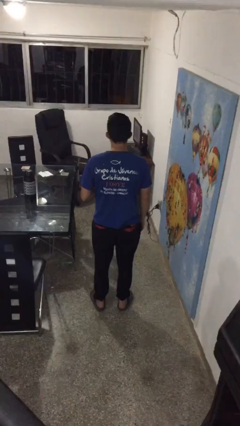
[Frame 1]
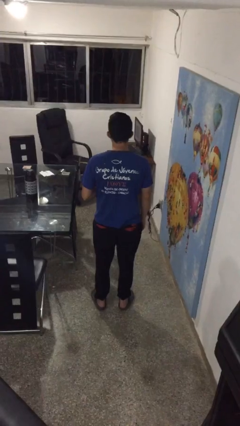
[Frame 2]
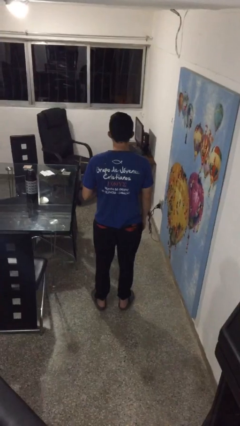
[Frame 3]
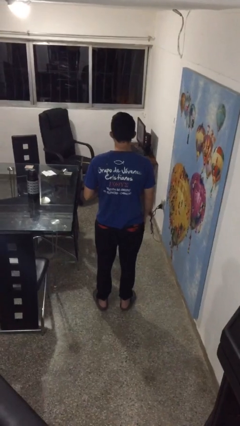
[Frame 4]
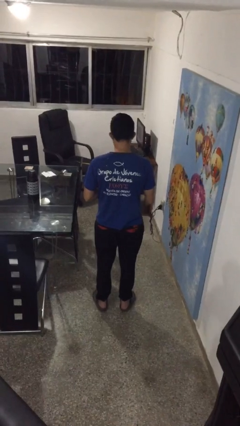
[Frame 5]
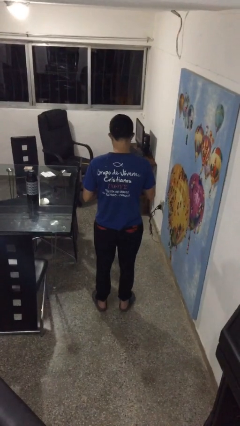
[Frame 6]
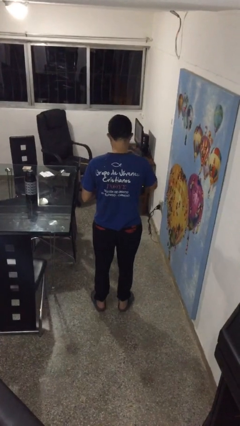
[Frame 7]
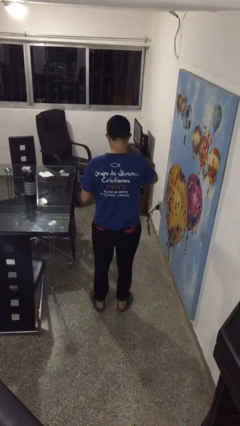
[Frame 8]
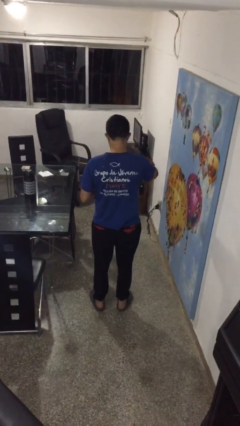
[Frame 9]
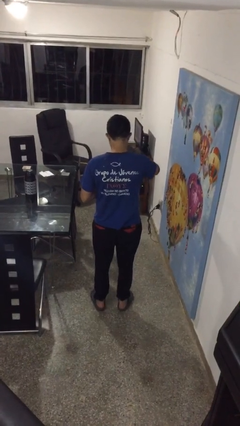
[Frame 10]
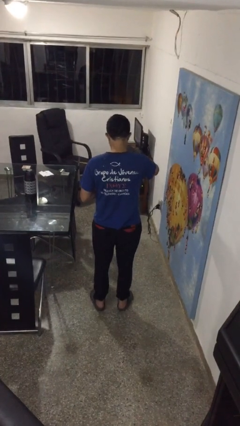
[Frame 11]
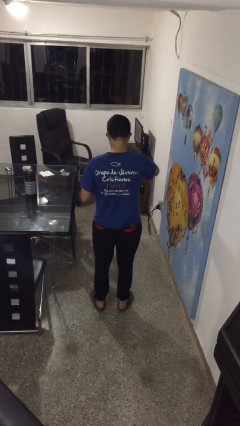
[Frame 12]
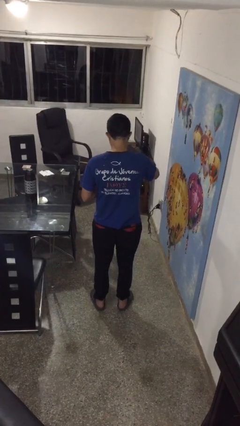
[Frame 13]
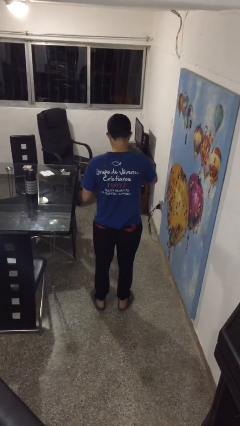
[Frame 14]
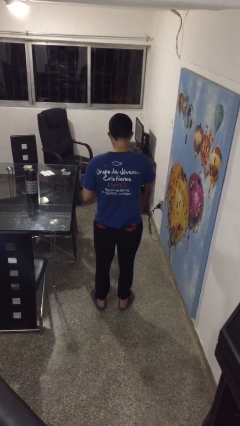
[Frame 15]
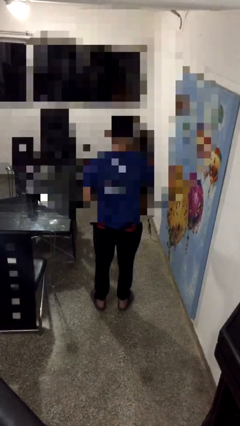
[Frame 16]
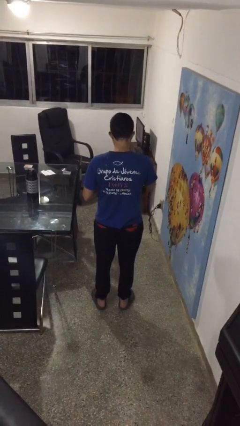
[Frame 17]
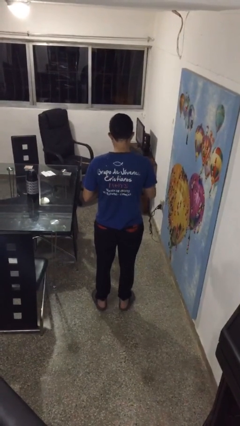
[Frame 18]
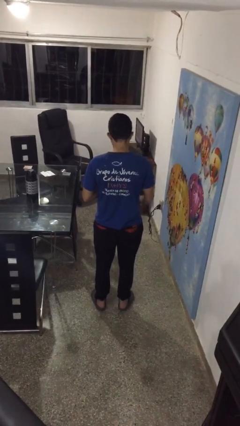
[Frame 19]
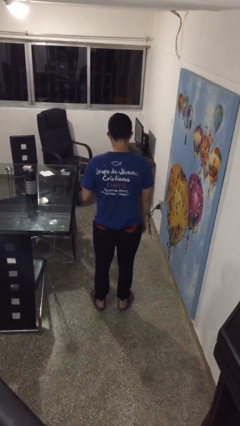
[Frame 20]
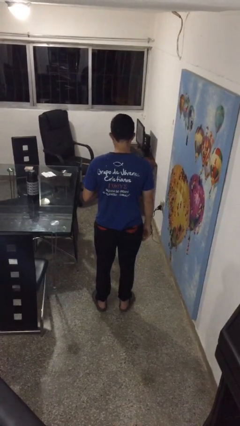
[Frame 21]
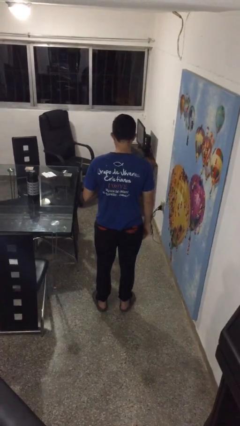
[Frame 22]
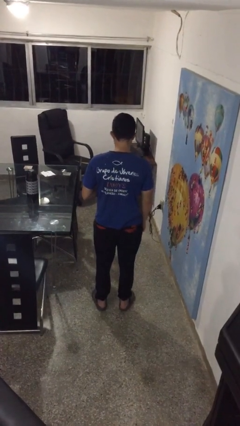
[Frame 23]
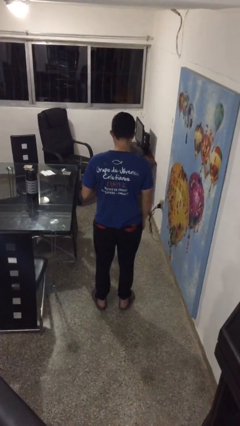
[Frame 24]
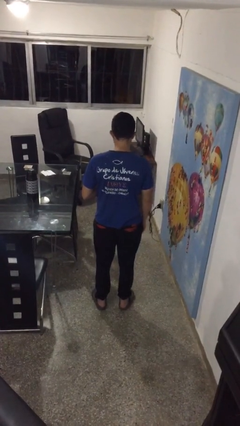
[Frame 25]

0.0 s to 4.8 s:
person eats snack from bag

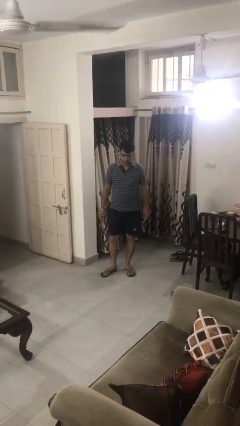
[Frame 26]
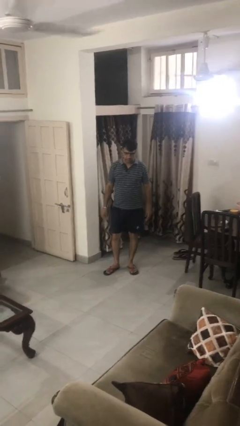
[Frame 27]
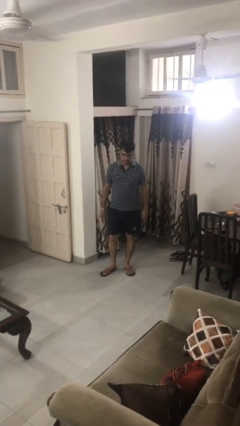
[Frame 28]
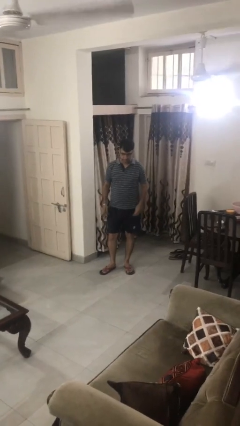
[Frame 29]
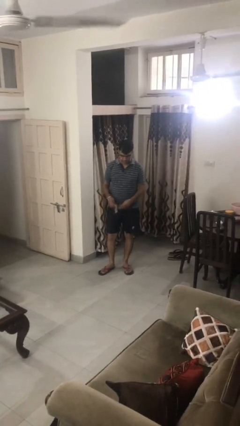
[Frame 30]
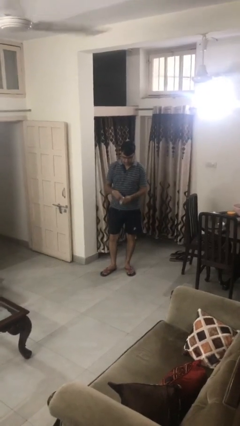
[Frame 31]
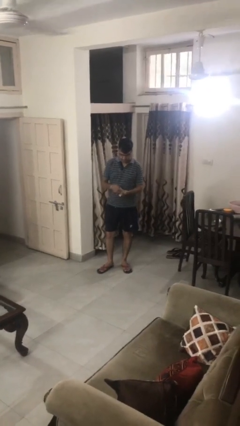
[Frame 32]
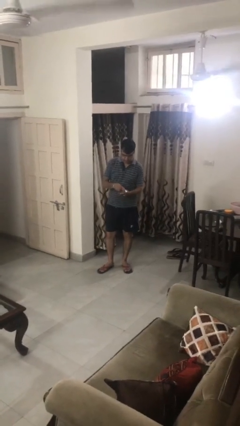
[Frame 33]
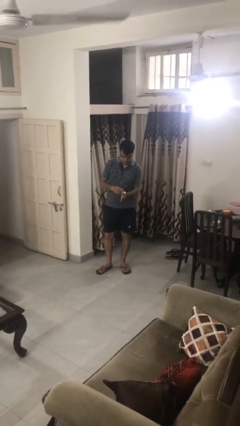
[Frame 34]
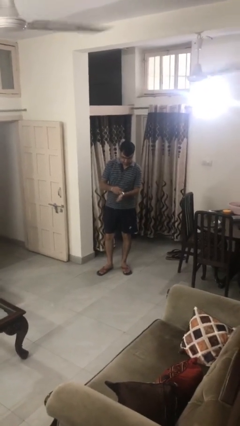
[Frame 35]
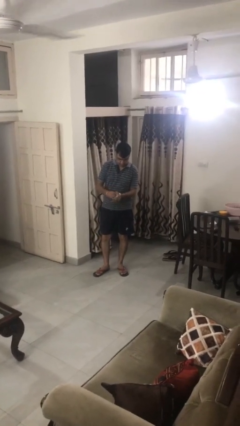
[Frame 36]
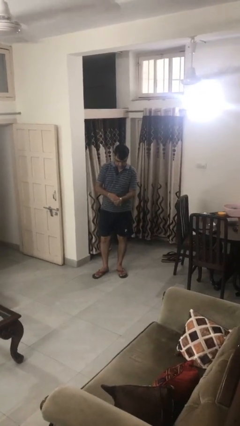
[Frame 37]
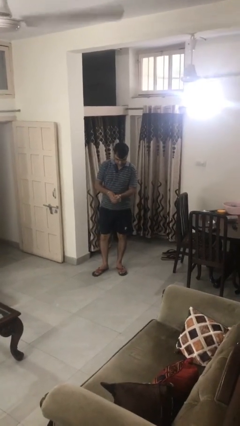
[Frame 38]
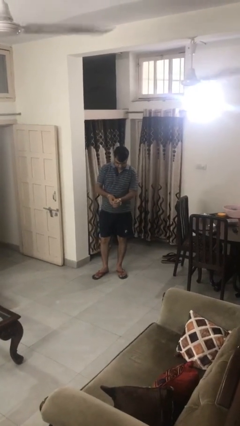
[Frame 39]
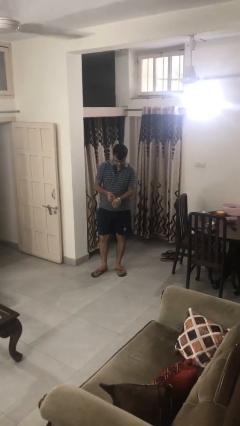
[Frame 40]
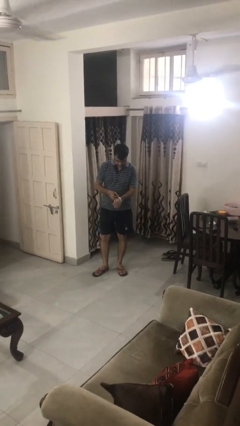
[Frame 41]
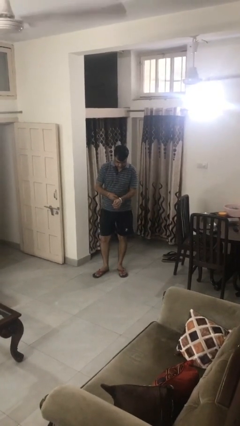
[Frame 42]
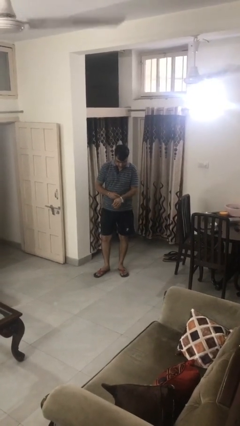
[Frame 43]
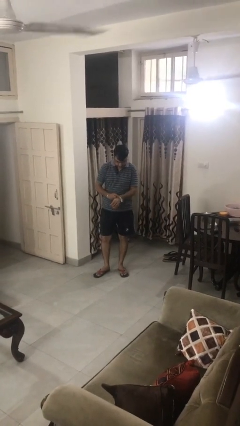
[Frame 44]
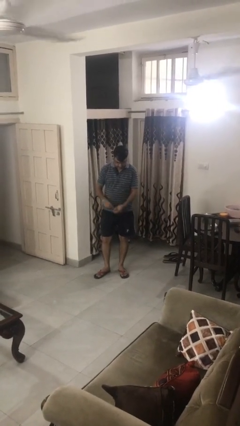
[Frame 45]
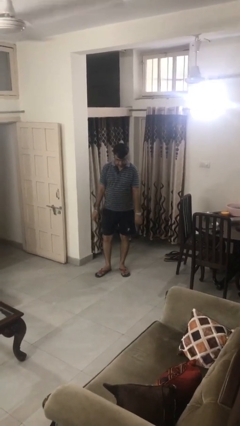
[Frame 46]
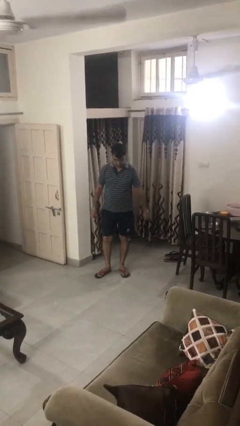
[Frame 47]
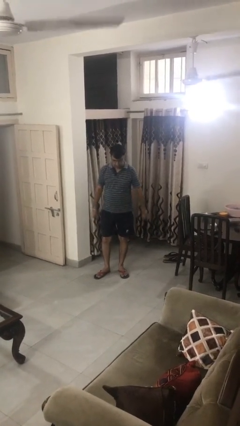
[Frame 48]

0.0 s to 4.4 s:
person puts on wristwatch

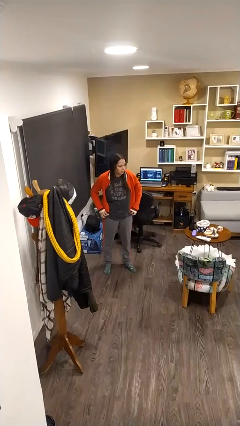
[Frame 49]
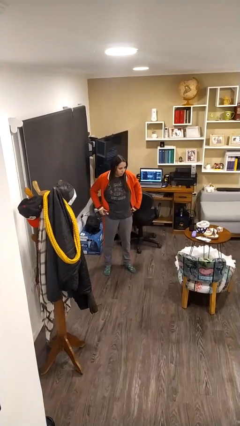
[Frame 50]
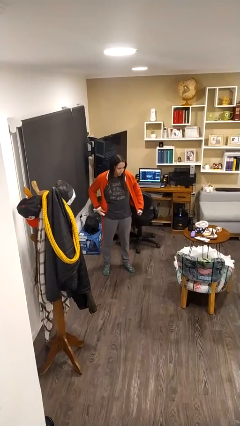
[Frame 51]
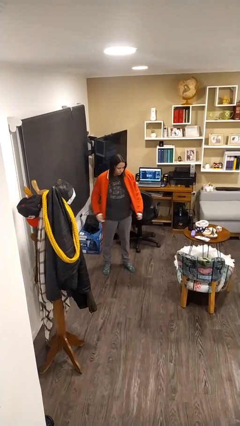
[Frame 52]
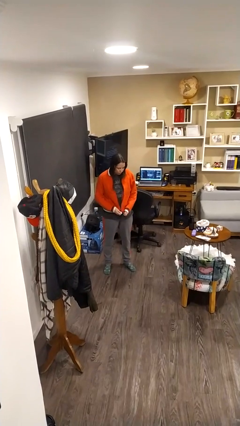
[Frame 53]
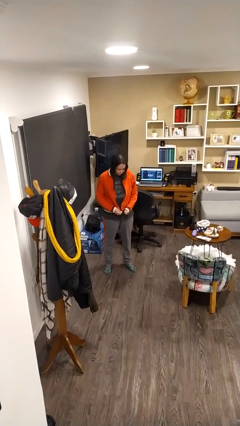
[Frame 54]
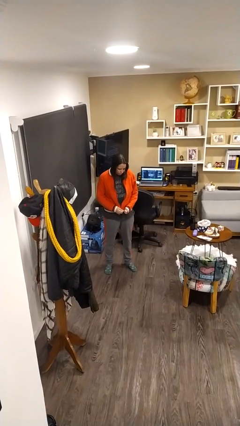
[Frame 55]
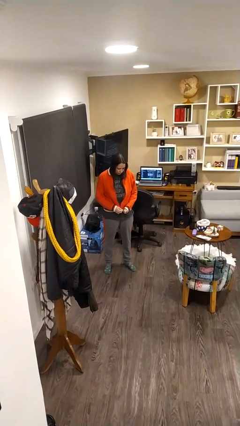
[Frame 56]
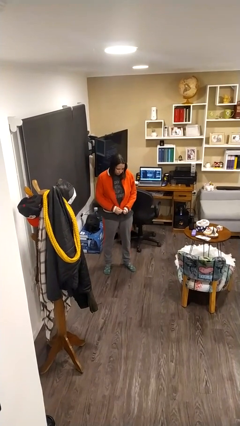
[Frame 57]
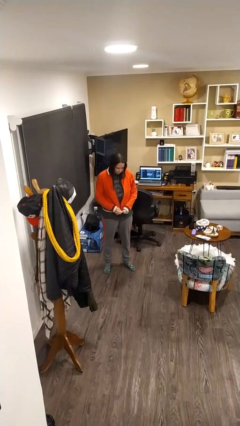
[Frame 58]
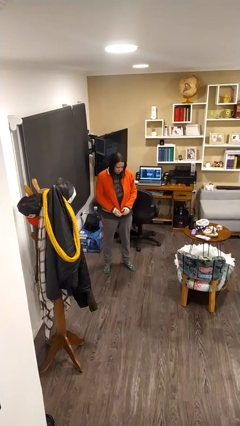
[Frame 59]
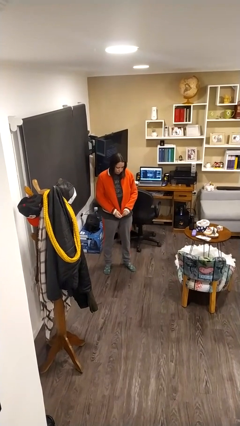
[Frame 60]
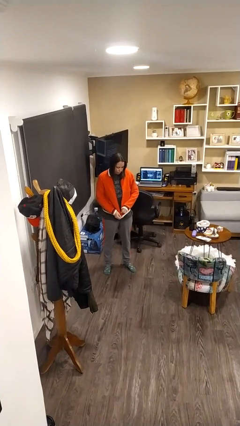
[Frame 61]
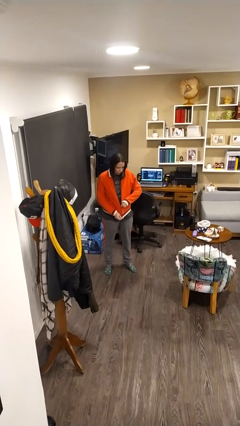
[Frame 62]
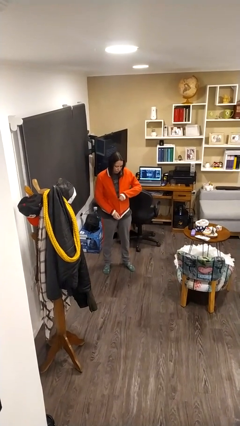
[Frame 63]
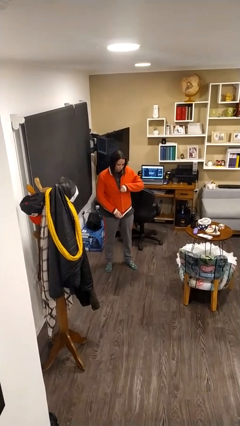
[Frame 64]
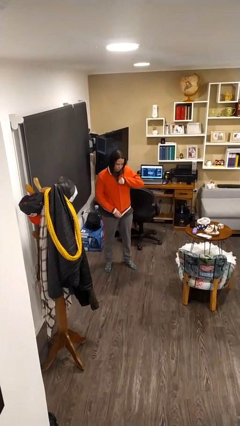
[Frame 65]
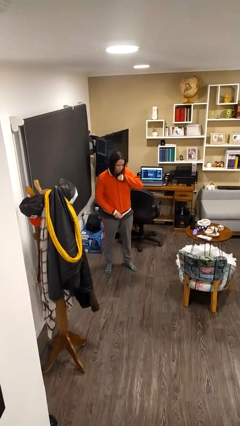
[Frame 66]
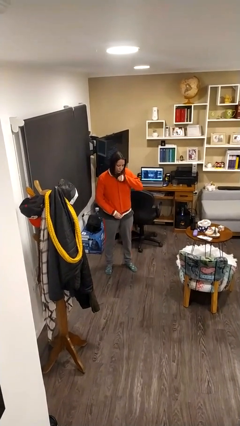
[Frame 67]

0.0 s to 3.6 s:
person zips up jacket

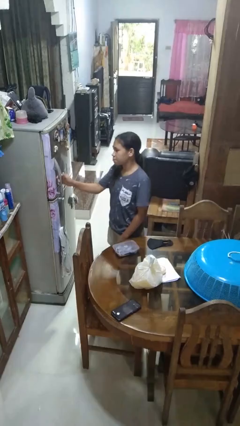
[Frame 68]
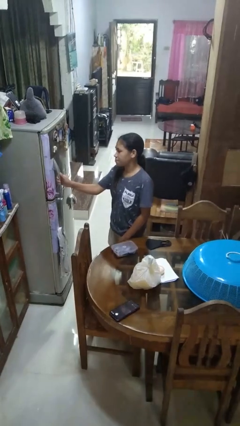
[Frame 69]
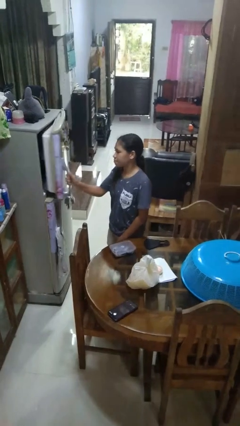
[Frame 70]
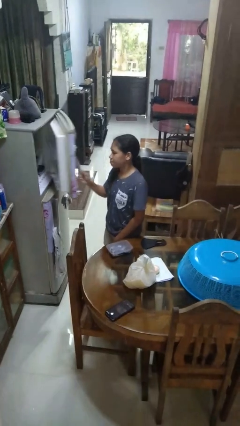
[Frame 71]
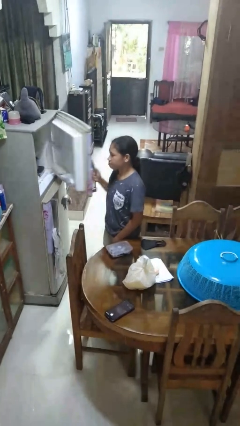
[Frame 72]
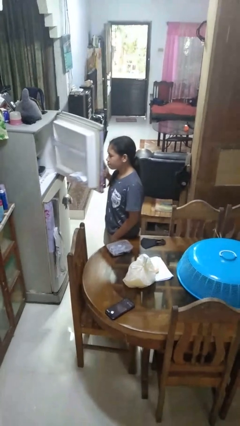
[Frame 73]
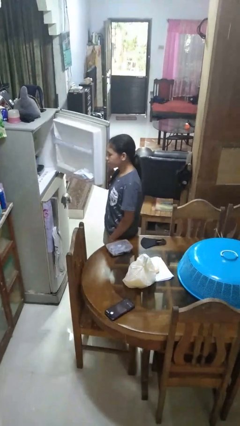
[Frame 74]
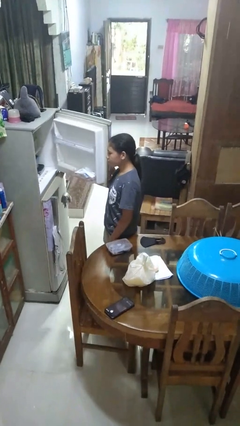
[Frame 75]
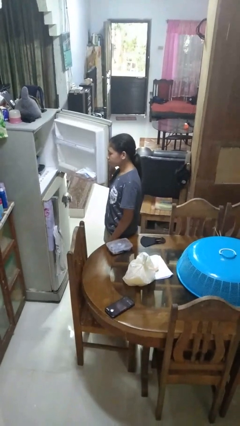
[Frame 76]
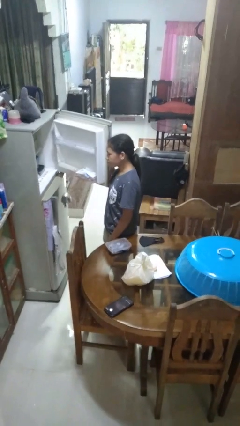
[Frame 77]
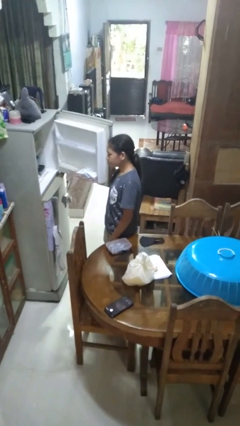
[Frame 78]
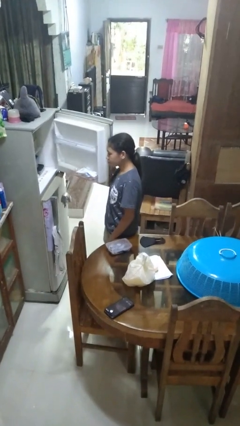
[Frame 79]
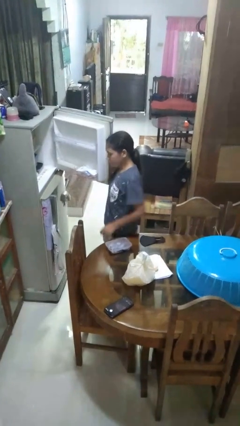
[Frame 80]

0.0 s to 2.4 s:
person opens refrigerator

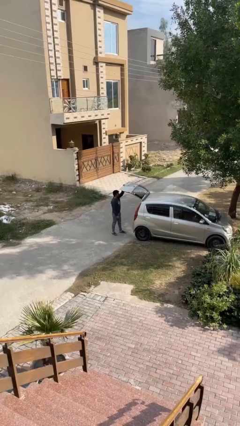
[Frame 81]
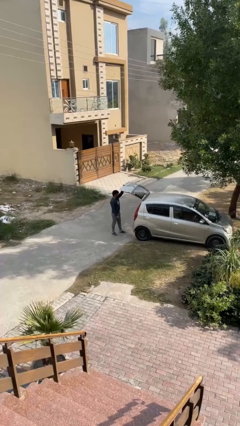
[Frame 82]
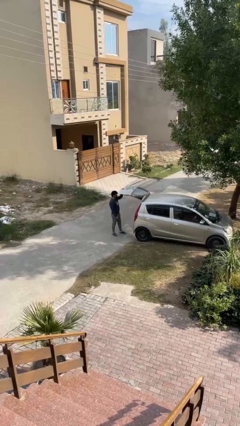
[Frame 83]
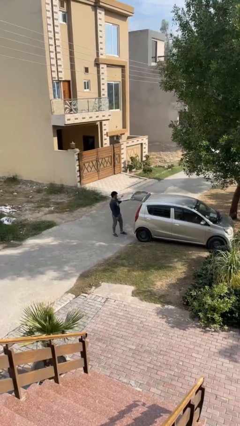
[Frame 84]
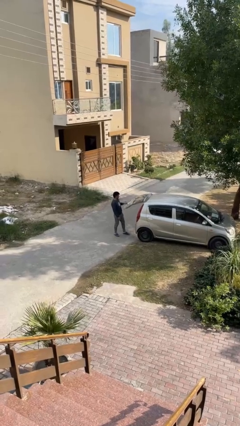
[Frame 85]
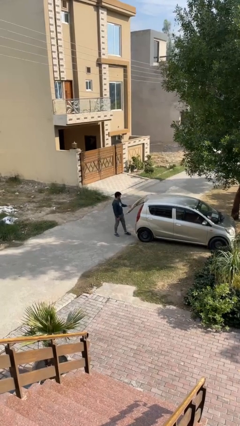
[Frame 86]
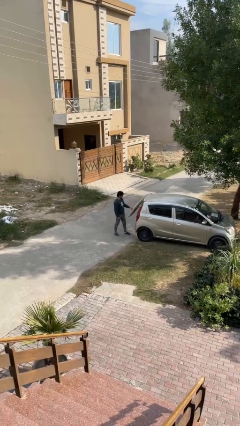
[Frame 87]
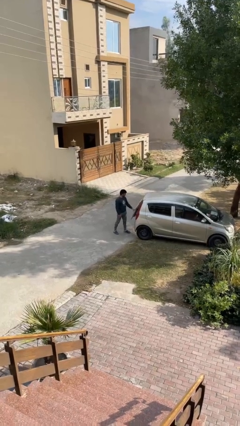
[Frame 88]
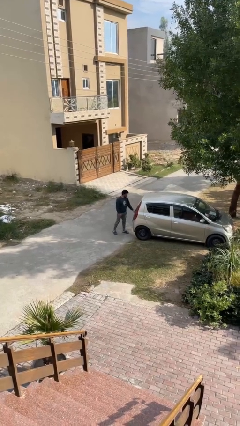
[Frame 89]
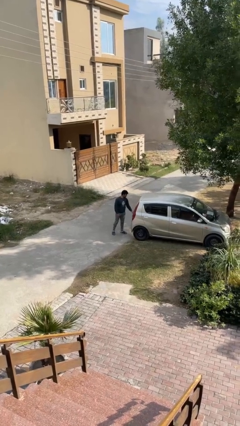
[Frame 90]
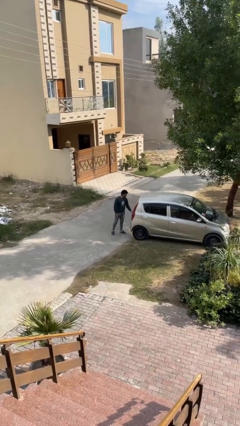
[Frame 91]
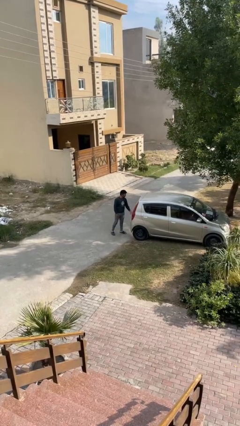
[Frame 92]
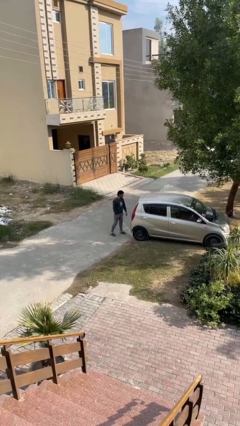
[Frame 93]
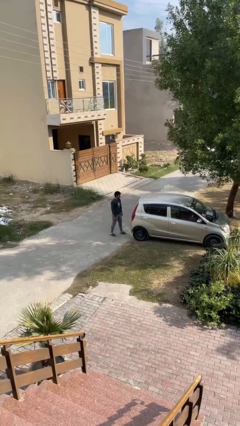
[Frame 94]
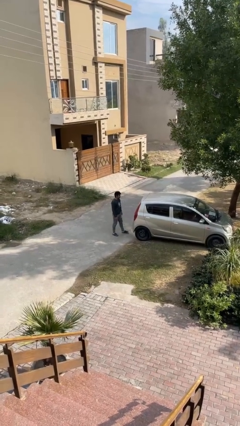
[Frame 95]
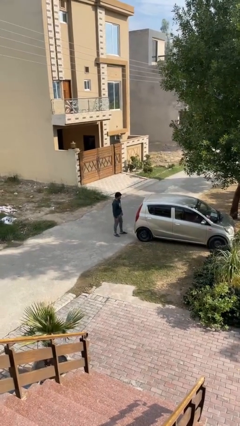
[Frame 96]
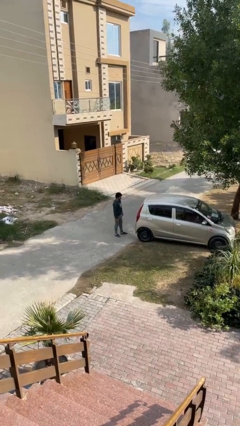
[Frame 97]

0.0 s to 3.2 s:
person closes car trunk
